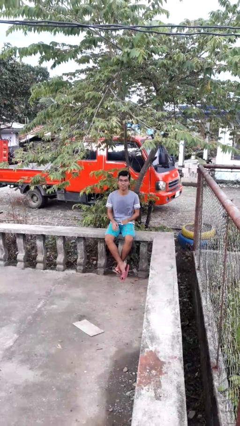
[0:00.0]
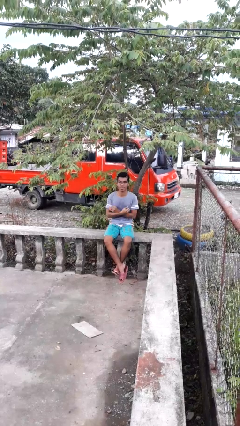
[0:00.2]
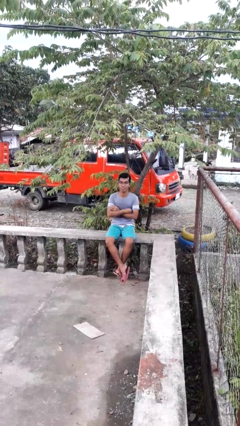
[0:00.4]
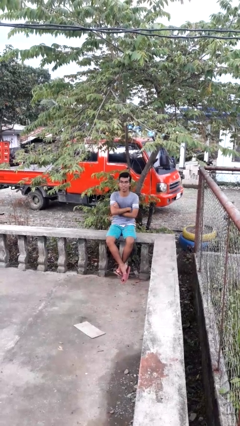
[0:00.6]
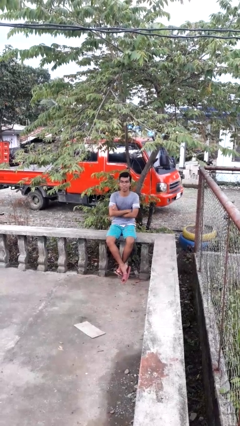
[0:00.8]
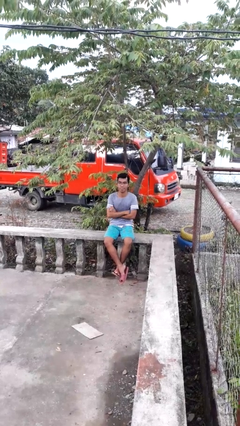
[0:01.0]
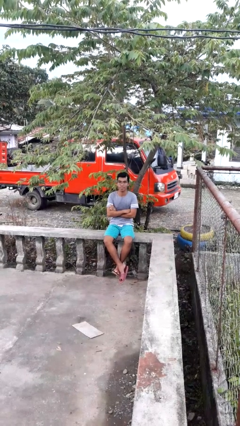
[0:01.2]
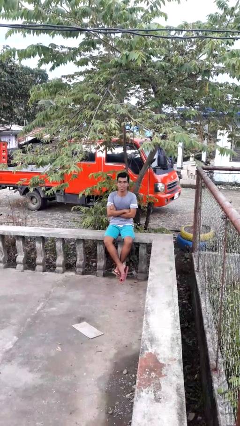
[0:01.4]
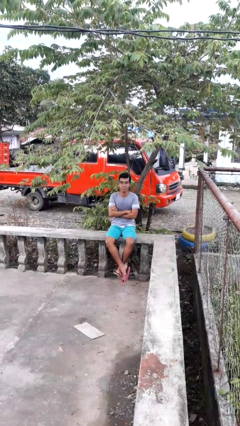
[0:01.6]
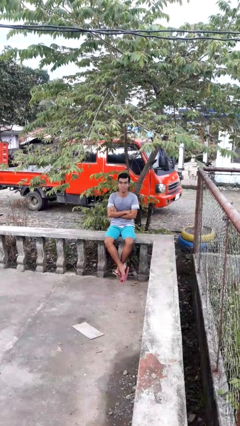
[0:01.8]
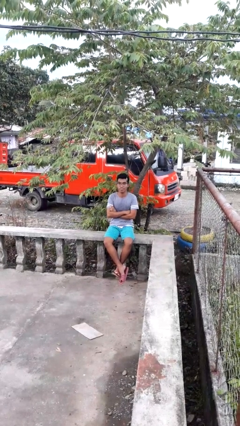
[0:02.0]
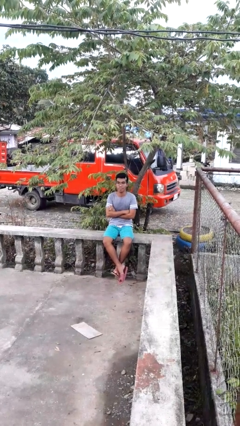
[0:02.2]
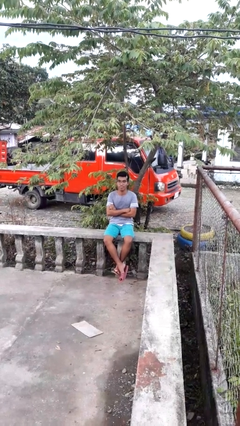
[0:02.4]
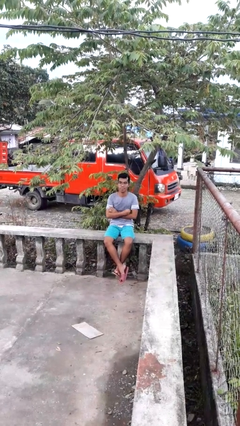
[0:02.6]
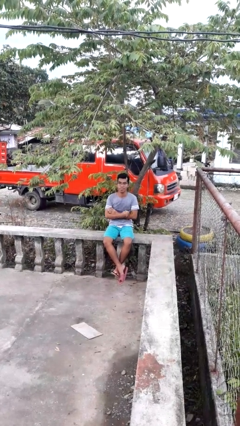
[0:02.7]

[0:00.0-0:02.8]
person crosses arms

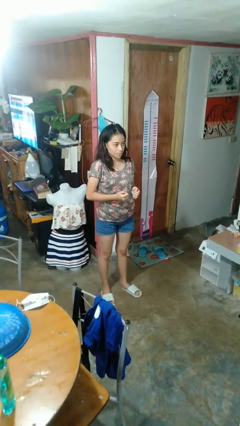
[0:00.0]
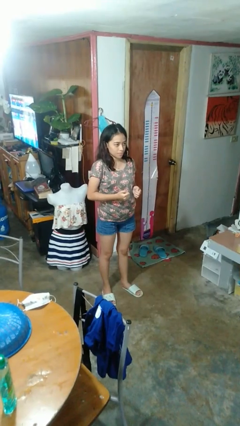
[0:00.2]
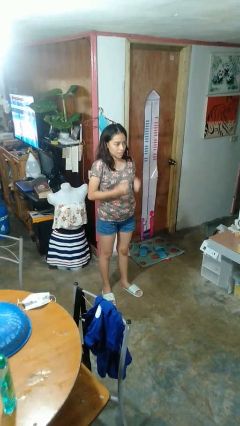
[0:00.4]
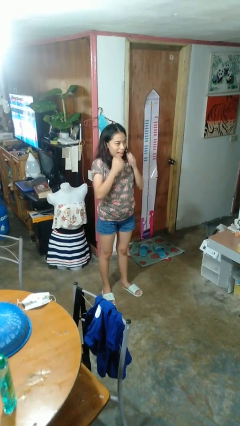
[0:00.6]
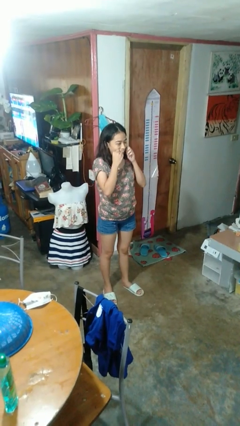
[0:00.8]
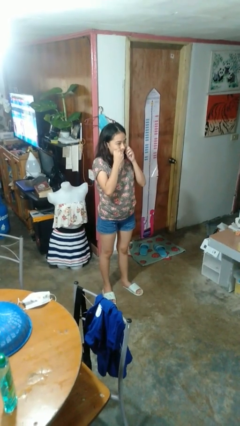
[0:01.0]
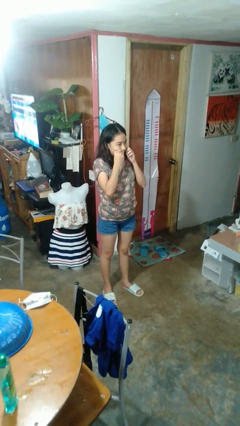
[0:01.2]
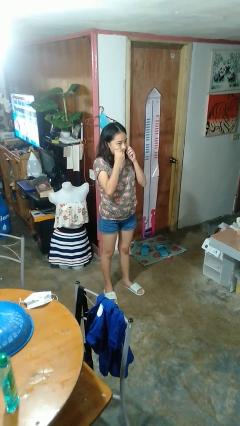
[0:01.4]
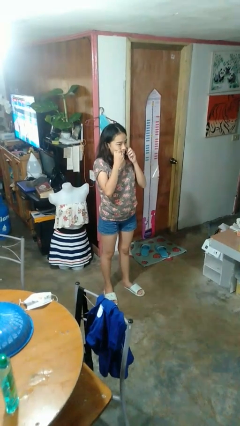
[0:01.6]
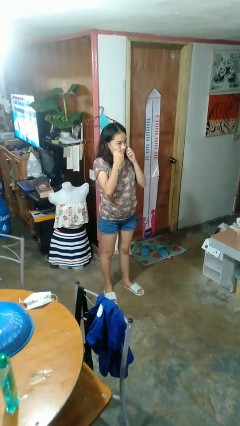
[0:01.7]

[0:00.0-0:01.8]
person flosses

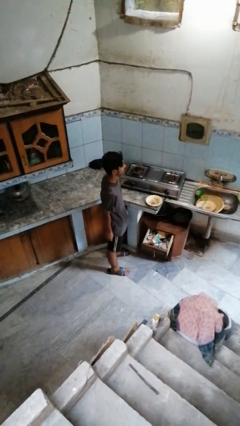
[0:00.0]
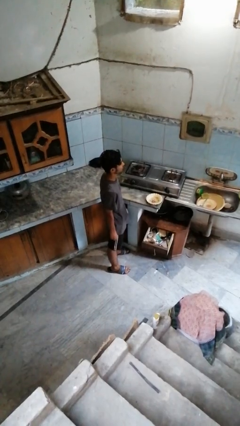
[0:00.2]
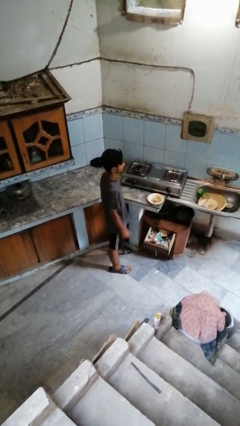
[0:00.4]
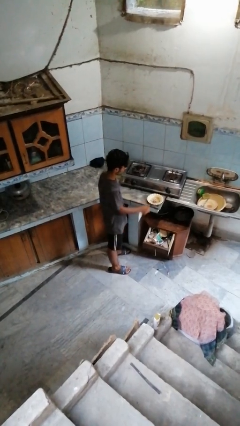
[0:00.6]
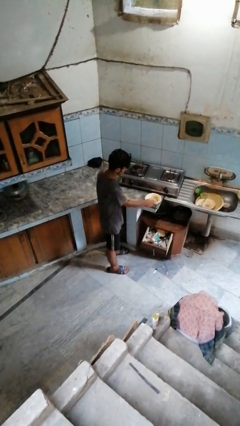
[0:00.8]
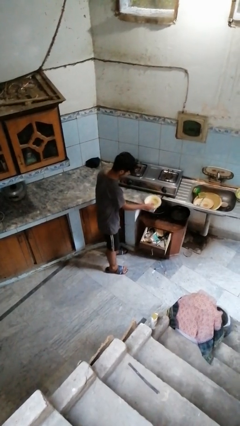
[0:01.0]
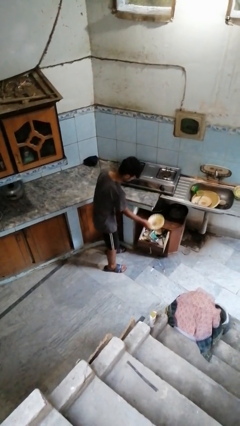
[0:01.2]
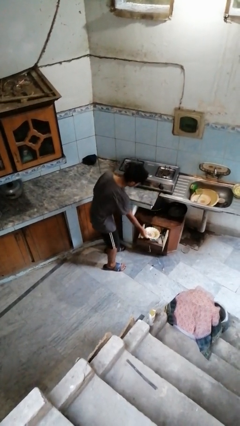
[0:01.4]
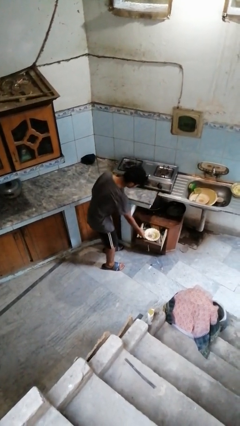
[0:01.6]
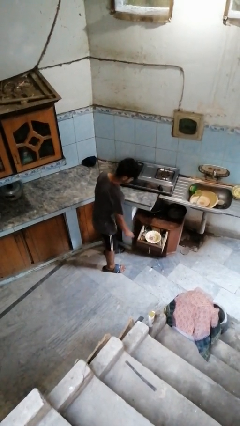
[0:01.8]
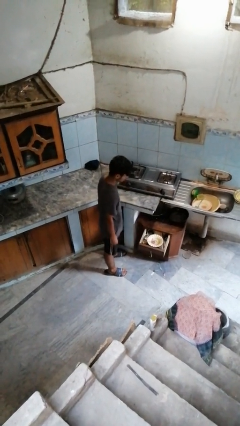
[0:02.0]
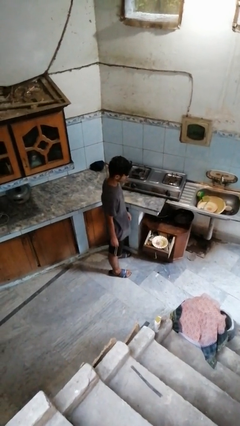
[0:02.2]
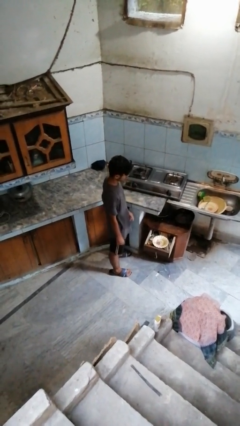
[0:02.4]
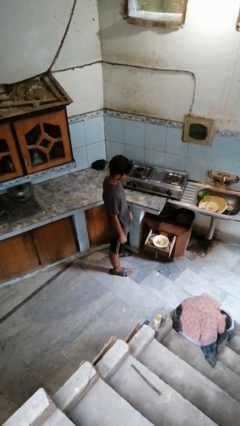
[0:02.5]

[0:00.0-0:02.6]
person puts object into kitchen drawer

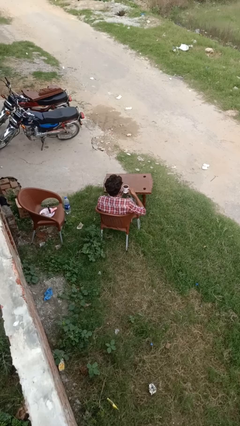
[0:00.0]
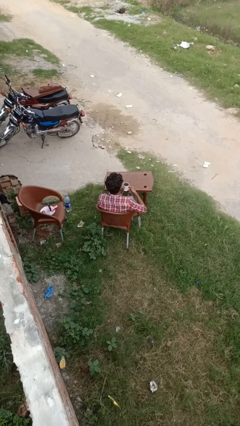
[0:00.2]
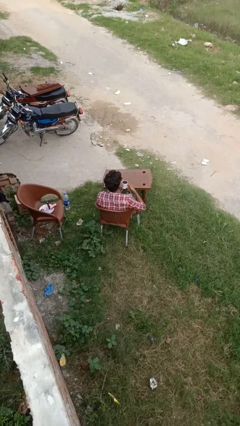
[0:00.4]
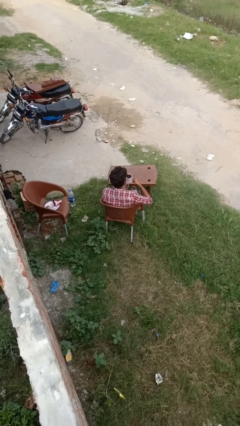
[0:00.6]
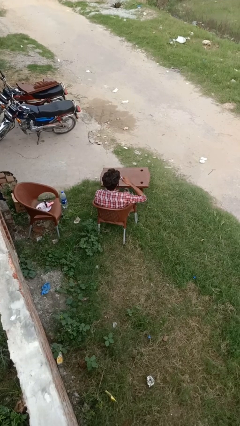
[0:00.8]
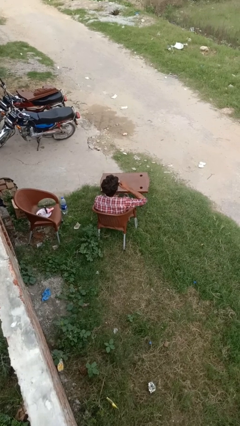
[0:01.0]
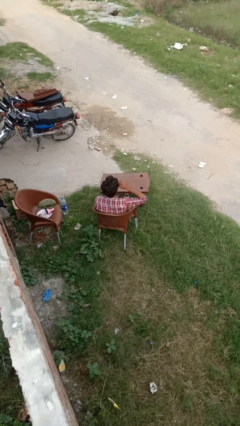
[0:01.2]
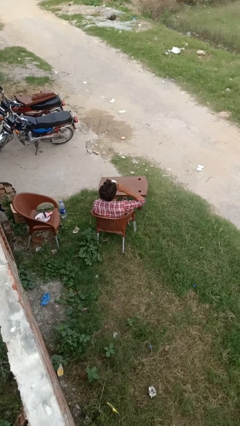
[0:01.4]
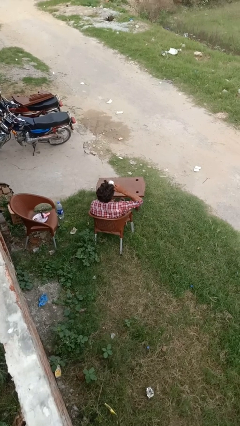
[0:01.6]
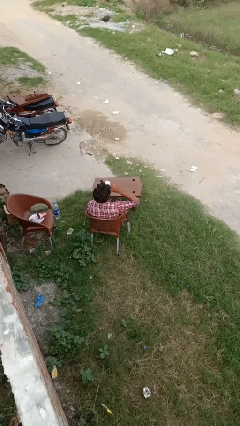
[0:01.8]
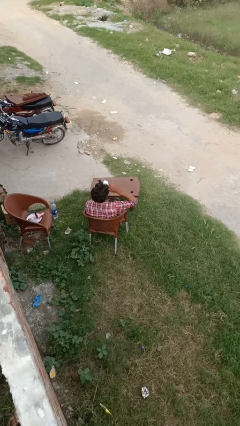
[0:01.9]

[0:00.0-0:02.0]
person drinks from mug

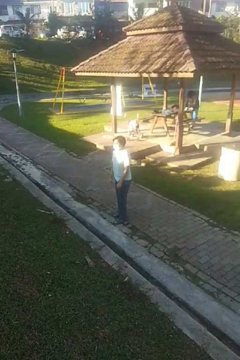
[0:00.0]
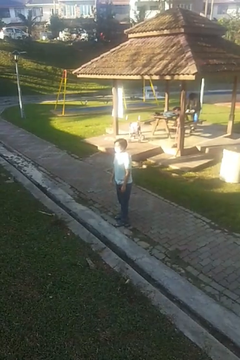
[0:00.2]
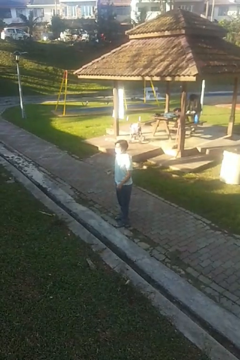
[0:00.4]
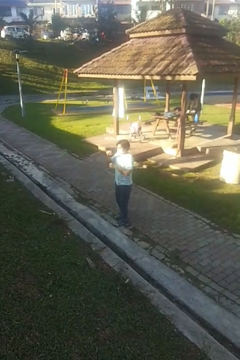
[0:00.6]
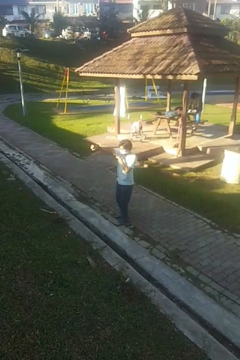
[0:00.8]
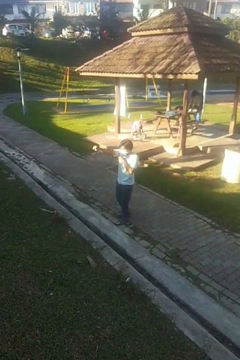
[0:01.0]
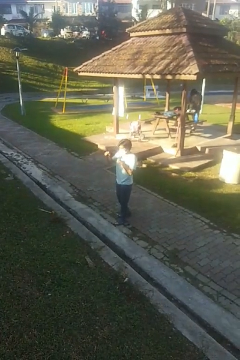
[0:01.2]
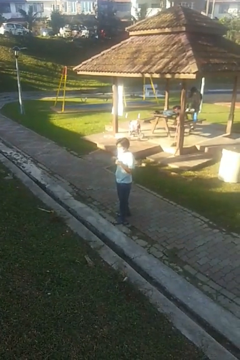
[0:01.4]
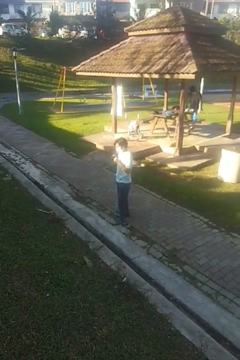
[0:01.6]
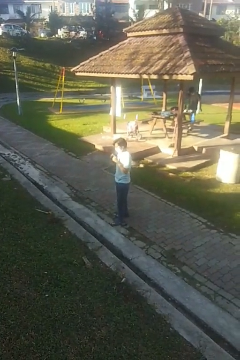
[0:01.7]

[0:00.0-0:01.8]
person punches

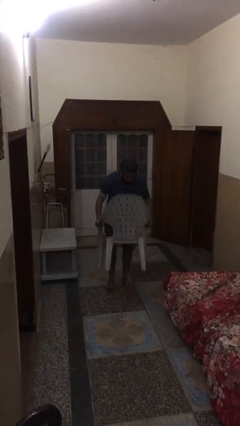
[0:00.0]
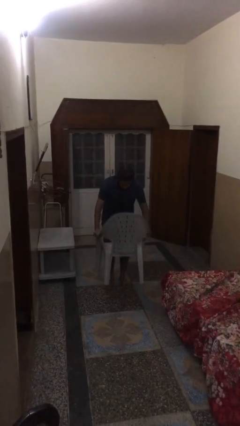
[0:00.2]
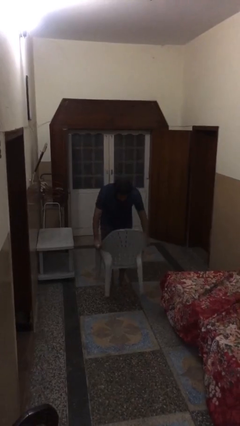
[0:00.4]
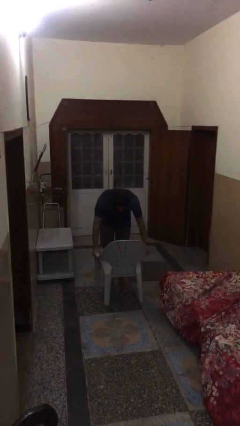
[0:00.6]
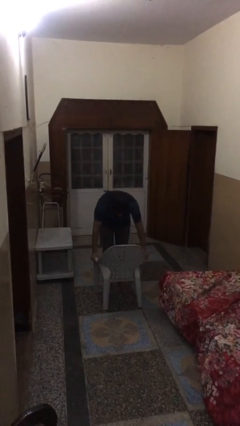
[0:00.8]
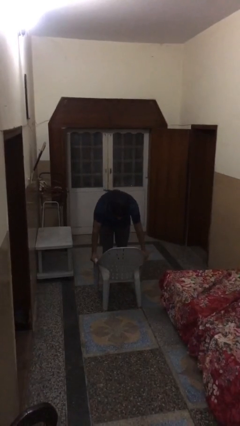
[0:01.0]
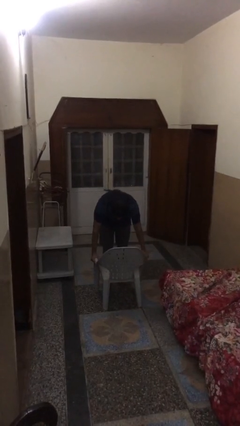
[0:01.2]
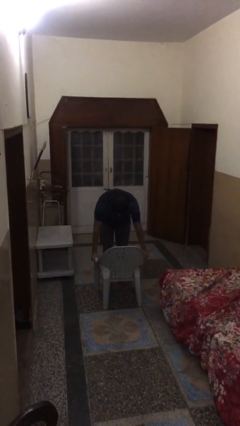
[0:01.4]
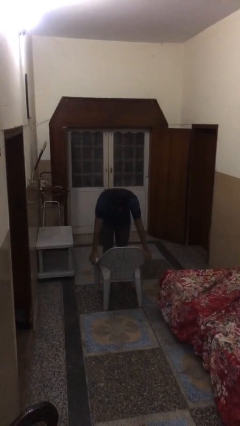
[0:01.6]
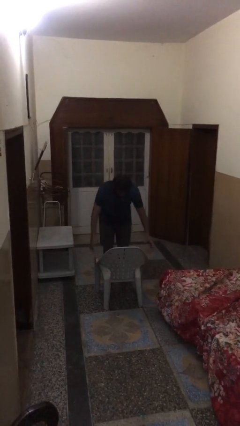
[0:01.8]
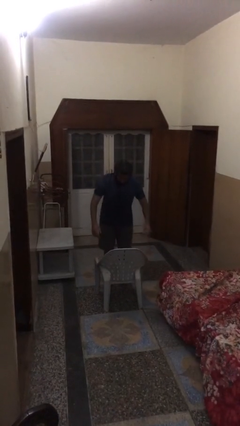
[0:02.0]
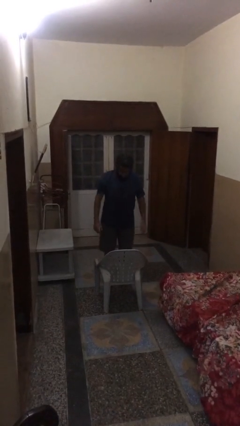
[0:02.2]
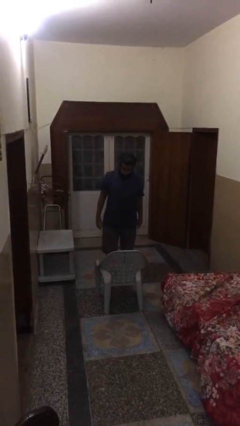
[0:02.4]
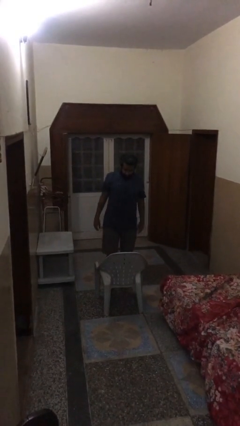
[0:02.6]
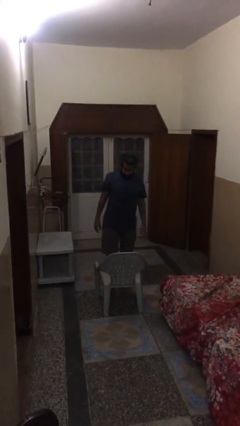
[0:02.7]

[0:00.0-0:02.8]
person puts down object on floor

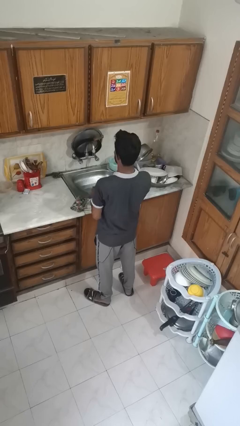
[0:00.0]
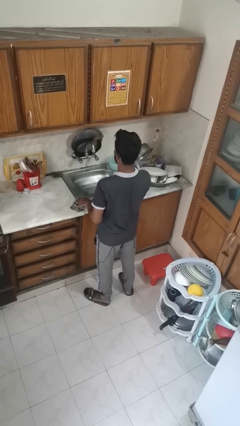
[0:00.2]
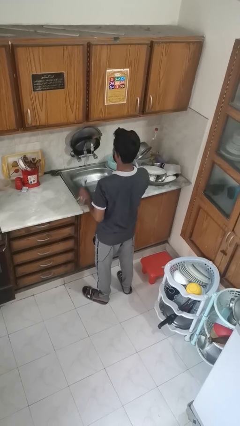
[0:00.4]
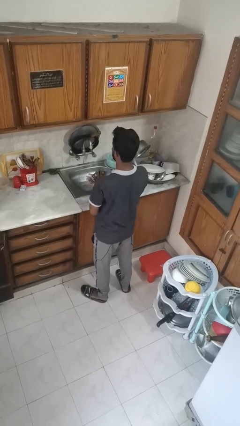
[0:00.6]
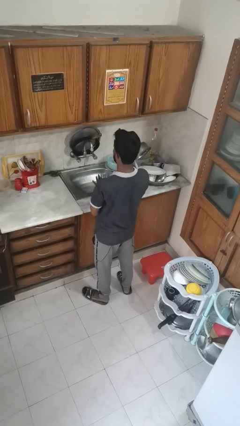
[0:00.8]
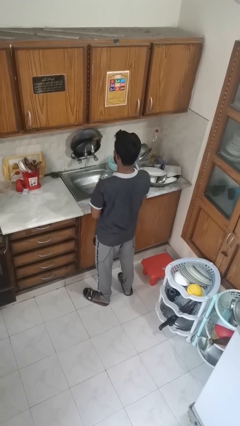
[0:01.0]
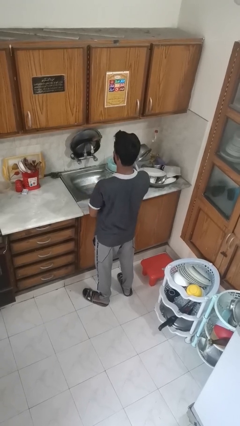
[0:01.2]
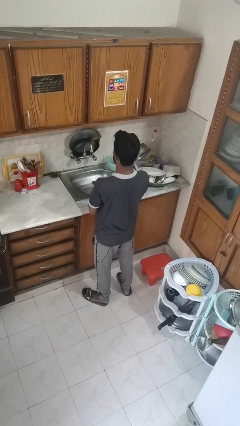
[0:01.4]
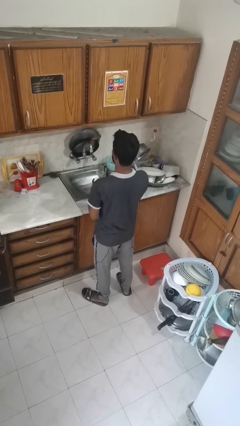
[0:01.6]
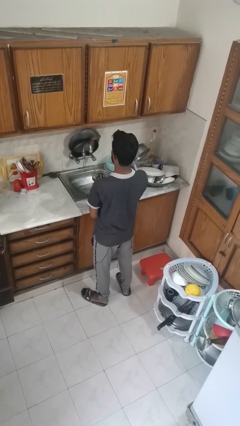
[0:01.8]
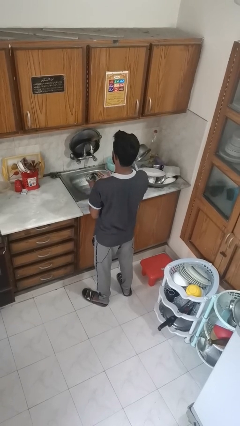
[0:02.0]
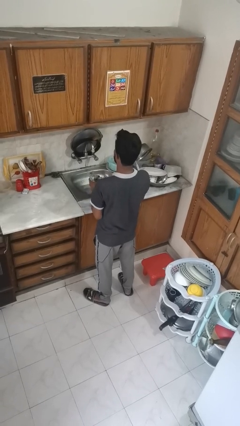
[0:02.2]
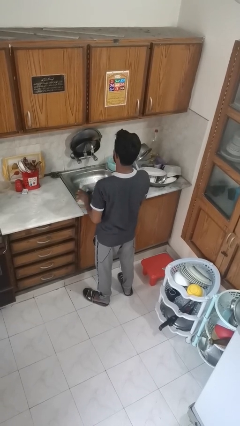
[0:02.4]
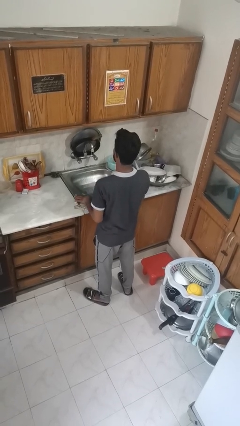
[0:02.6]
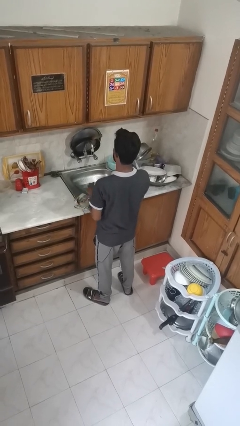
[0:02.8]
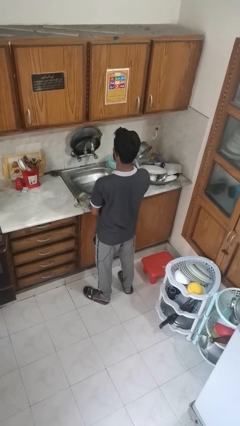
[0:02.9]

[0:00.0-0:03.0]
person dries hands with towel

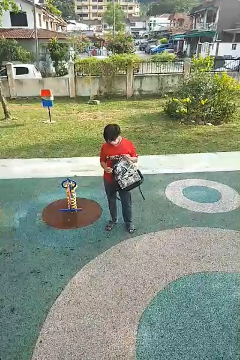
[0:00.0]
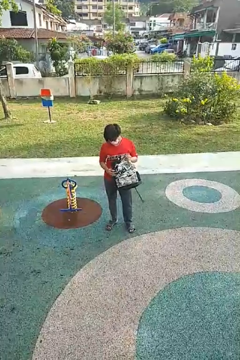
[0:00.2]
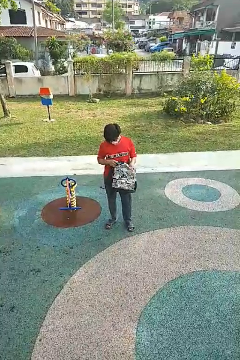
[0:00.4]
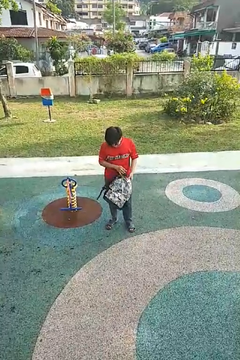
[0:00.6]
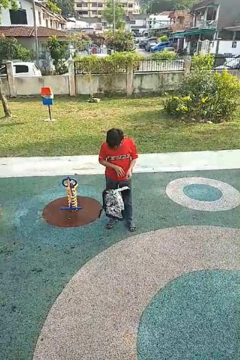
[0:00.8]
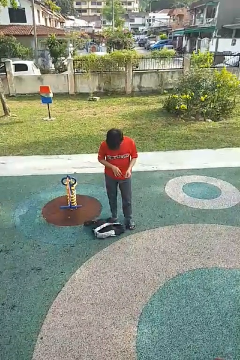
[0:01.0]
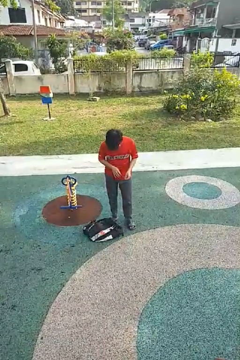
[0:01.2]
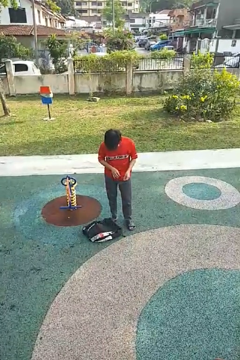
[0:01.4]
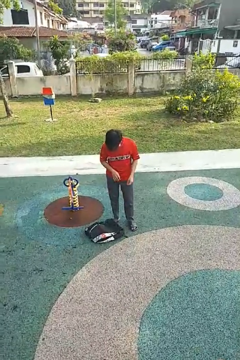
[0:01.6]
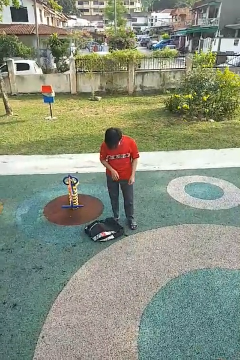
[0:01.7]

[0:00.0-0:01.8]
person drops object
